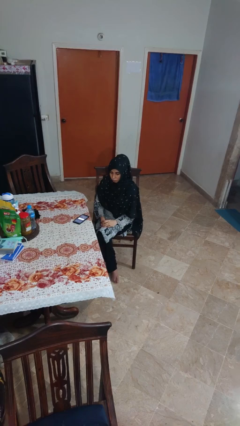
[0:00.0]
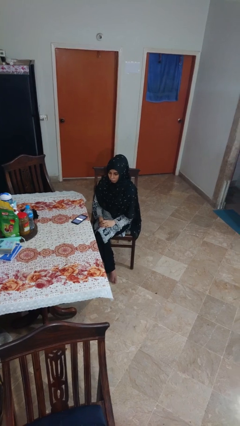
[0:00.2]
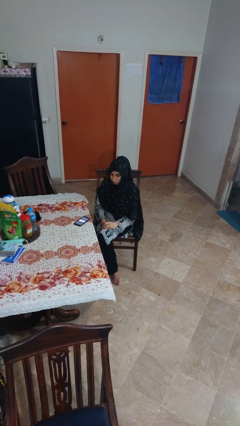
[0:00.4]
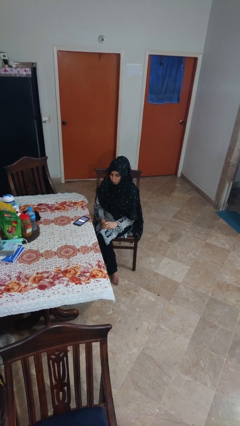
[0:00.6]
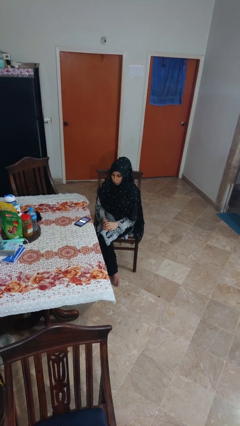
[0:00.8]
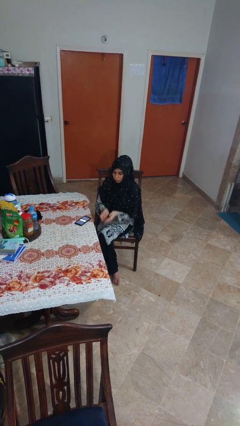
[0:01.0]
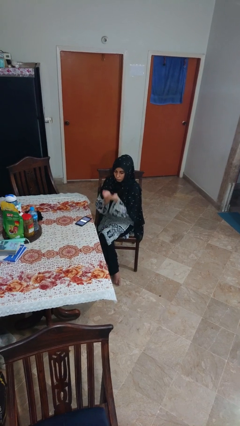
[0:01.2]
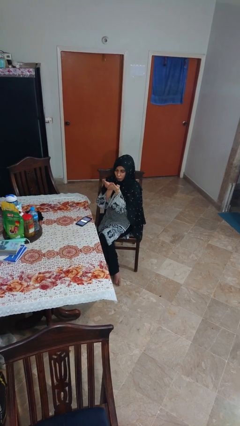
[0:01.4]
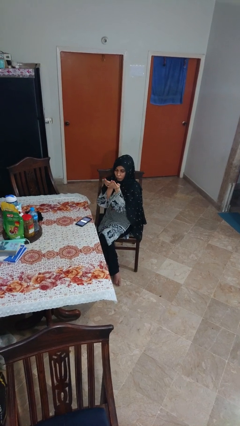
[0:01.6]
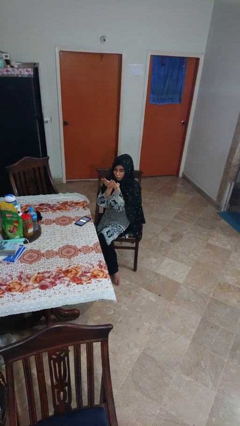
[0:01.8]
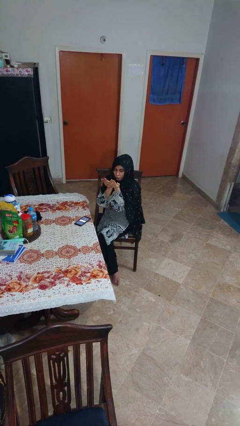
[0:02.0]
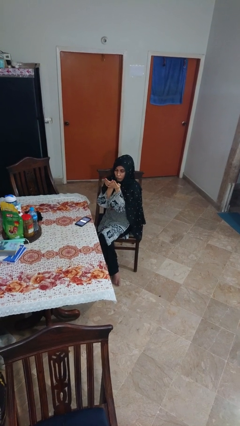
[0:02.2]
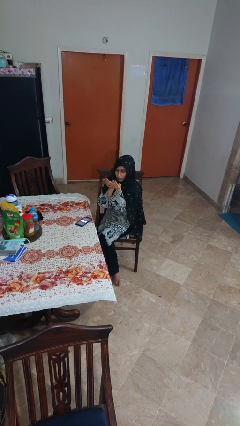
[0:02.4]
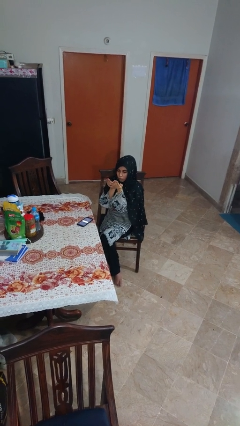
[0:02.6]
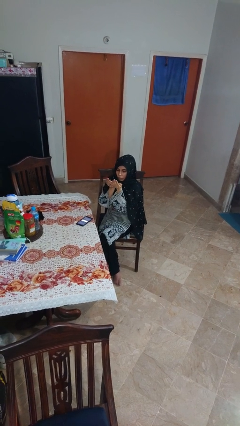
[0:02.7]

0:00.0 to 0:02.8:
person prays

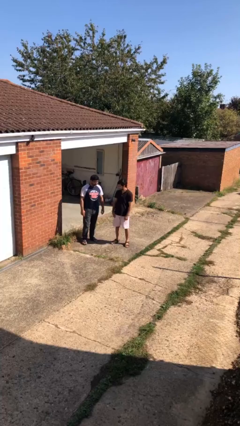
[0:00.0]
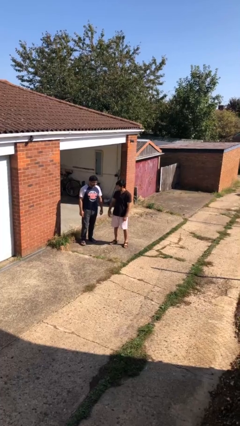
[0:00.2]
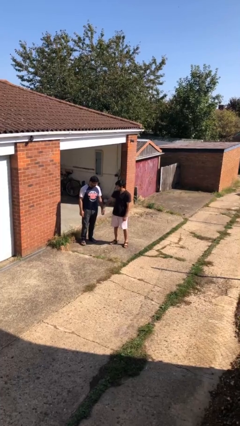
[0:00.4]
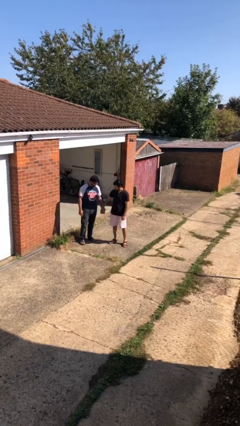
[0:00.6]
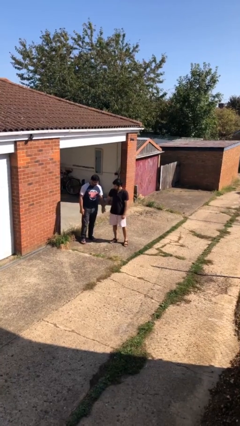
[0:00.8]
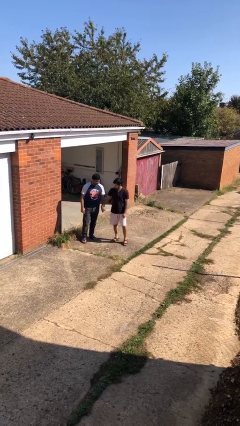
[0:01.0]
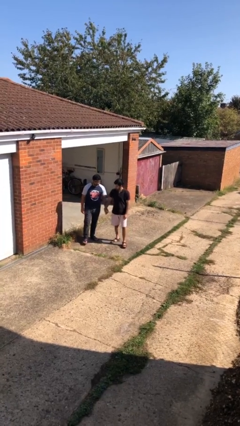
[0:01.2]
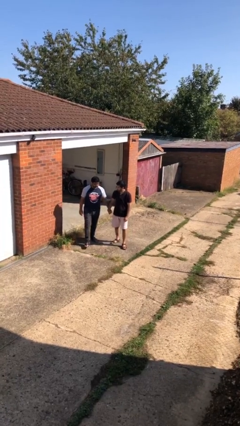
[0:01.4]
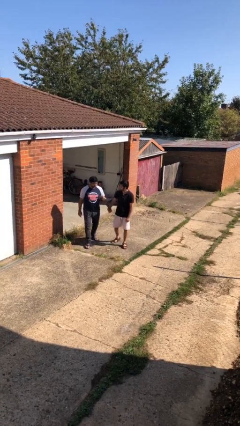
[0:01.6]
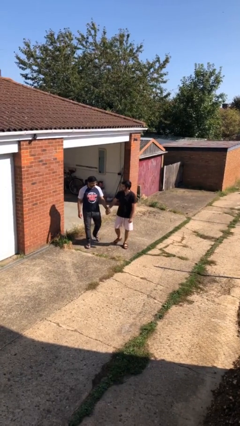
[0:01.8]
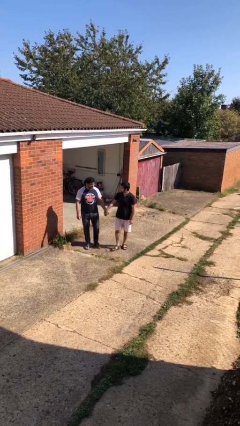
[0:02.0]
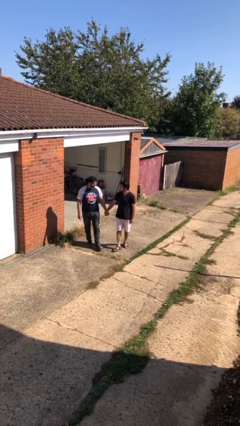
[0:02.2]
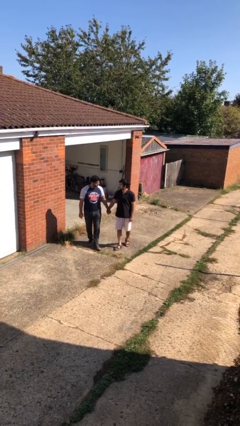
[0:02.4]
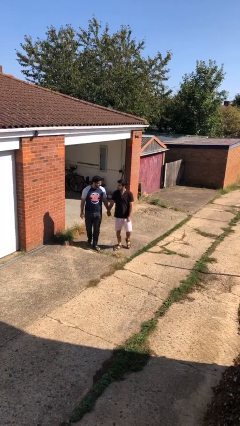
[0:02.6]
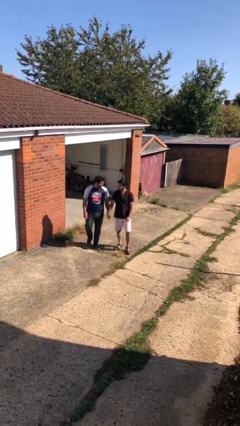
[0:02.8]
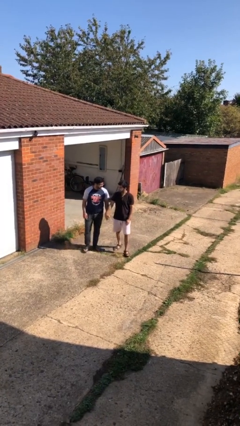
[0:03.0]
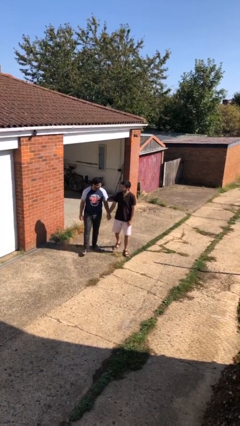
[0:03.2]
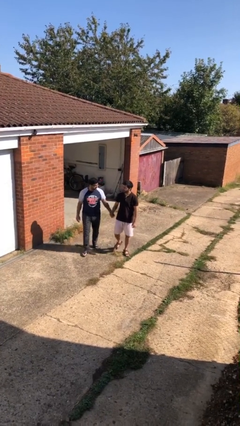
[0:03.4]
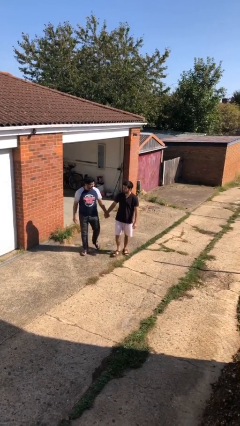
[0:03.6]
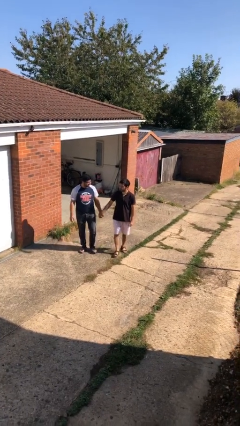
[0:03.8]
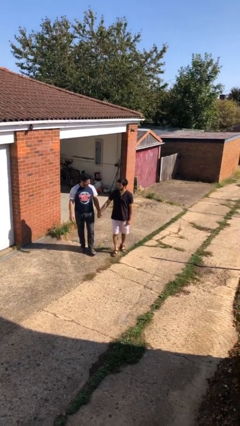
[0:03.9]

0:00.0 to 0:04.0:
person holds hand

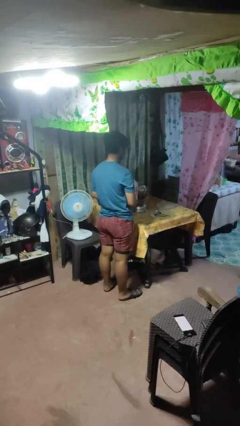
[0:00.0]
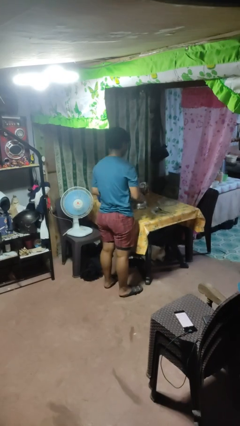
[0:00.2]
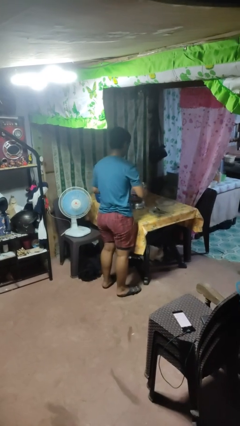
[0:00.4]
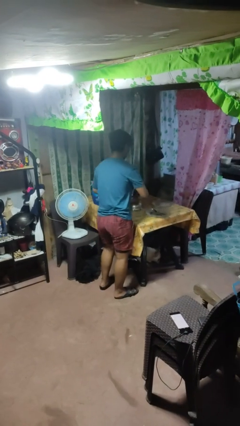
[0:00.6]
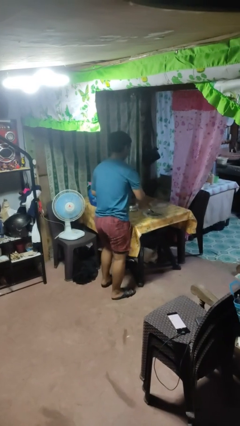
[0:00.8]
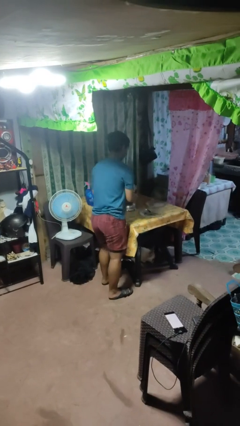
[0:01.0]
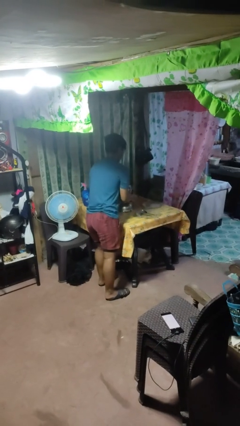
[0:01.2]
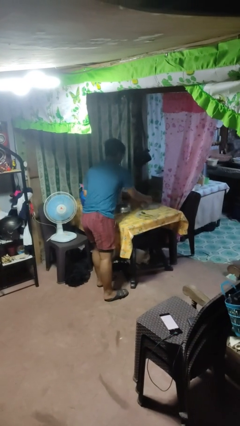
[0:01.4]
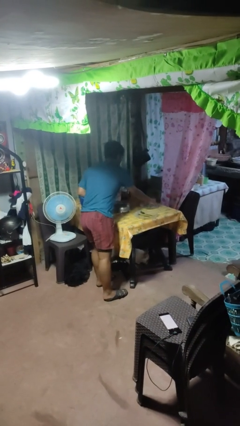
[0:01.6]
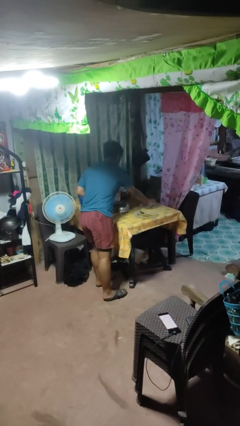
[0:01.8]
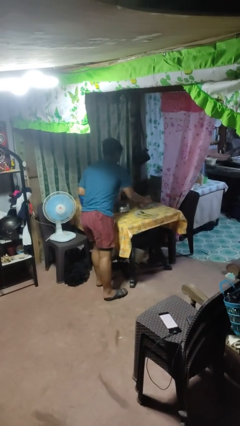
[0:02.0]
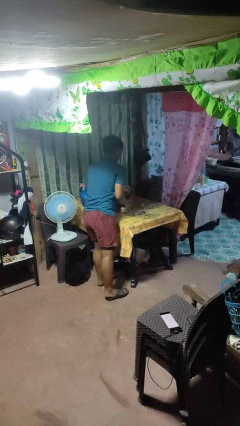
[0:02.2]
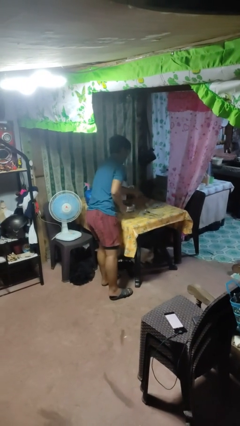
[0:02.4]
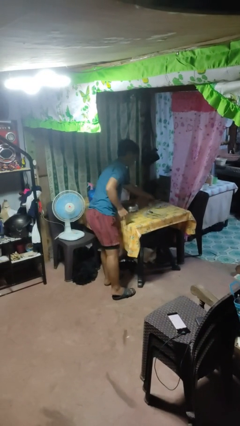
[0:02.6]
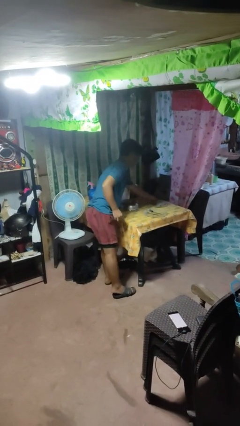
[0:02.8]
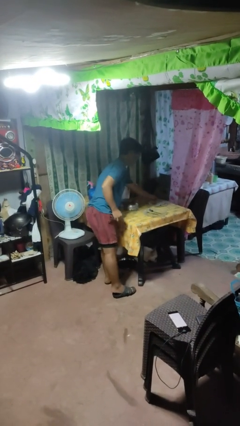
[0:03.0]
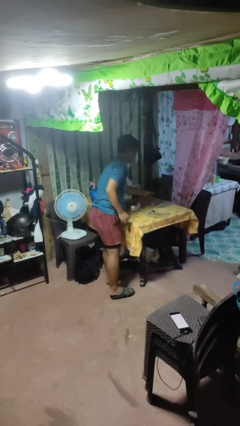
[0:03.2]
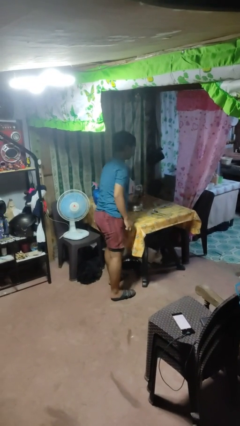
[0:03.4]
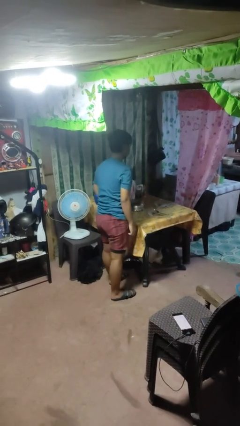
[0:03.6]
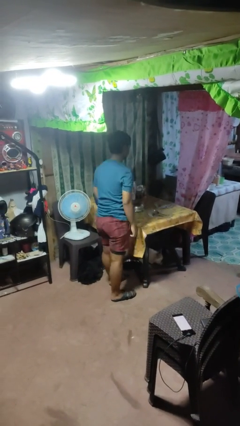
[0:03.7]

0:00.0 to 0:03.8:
person sets table

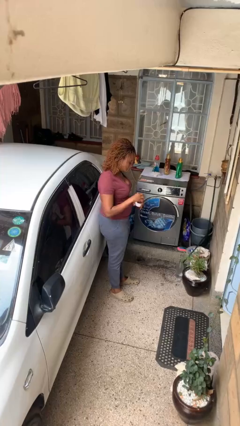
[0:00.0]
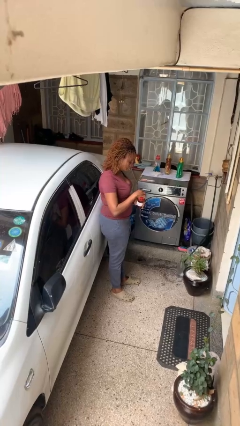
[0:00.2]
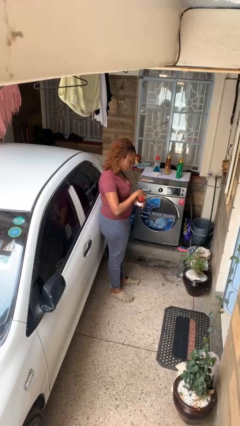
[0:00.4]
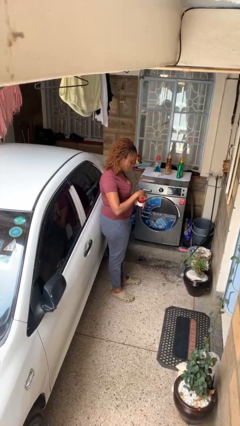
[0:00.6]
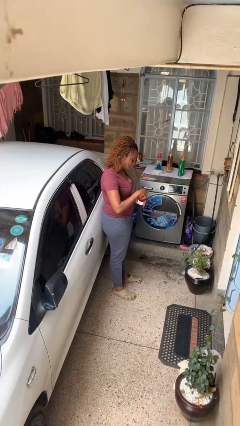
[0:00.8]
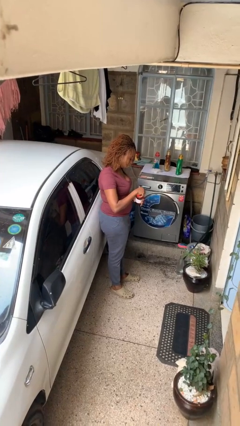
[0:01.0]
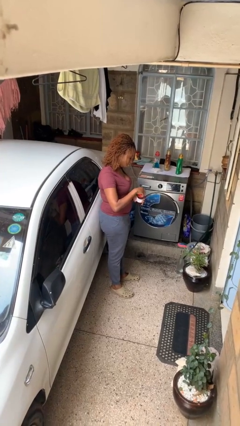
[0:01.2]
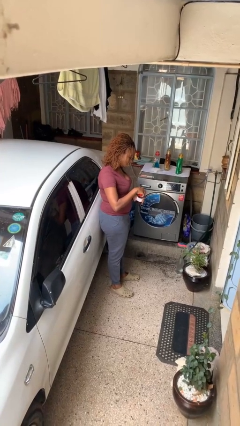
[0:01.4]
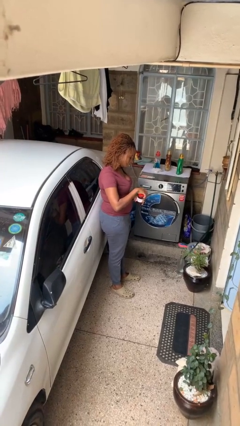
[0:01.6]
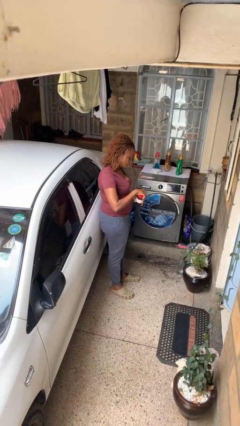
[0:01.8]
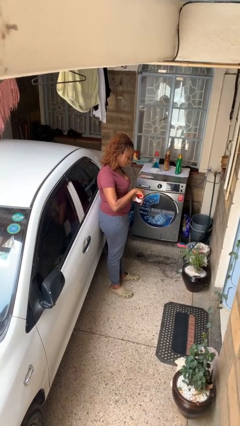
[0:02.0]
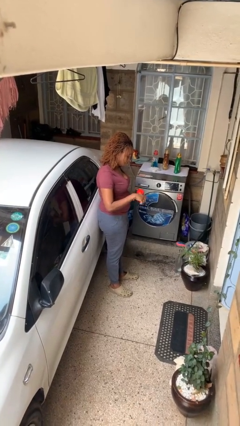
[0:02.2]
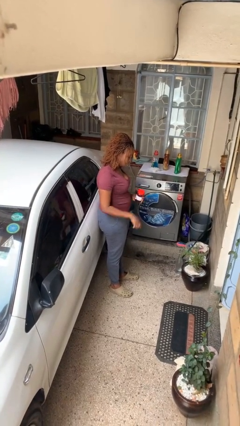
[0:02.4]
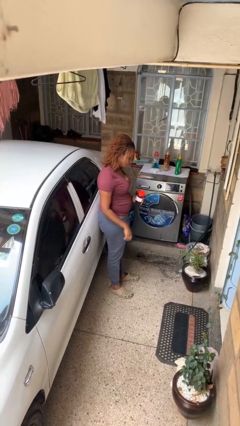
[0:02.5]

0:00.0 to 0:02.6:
person closes jar

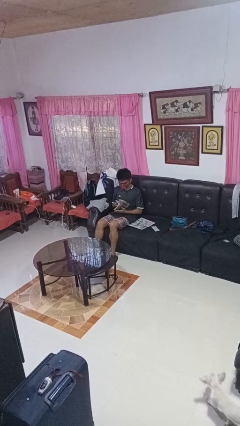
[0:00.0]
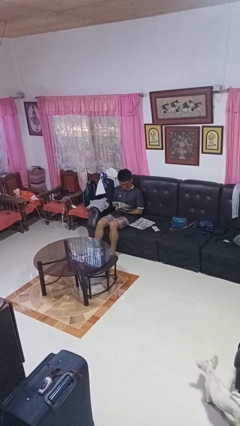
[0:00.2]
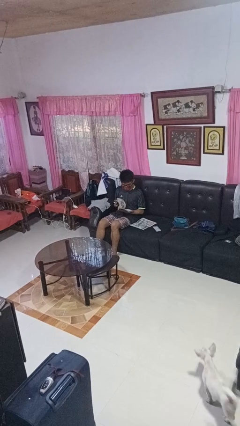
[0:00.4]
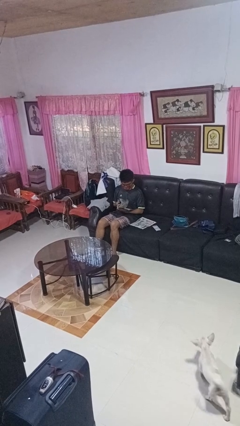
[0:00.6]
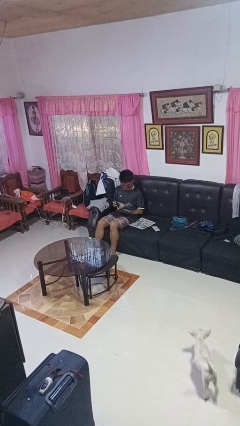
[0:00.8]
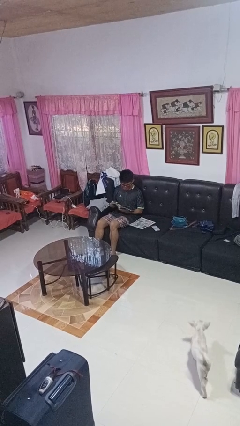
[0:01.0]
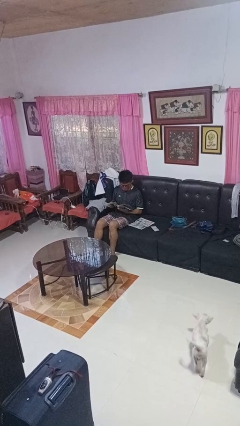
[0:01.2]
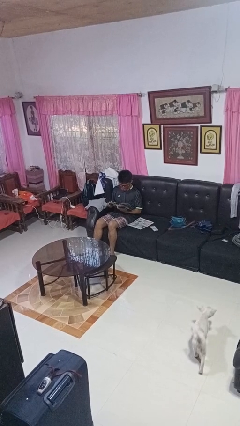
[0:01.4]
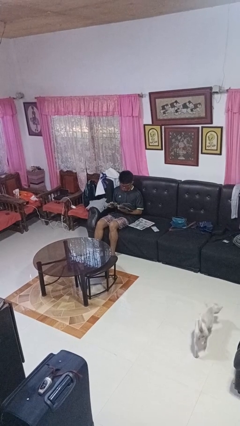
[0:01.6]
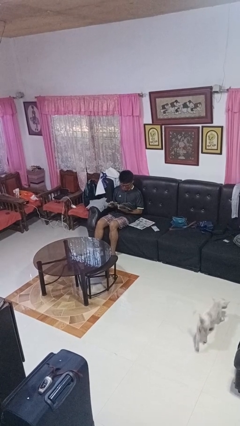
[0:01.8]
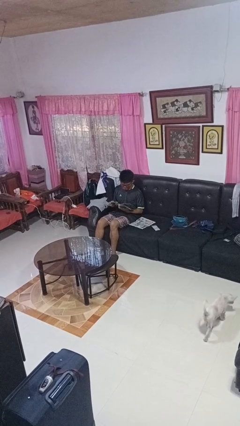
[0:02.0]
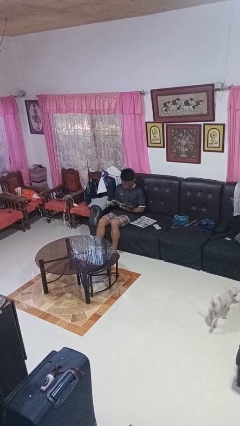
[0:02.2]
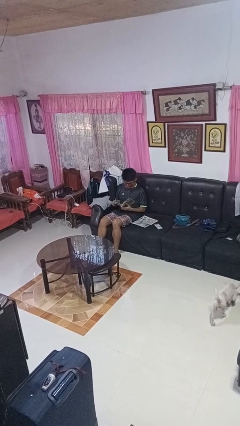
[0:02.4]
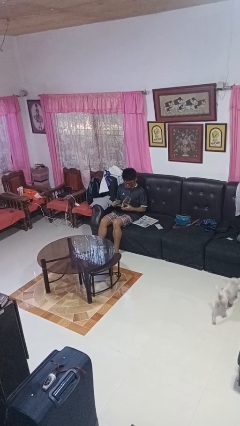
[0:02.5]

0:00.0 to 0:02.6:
person reads magazine

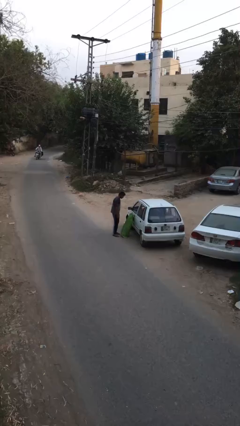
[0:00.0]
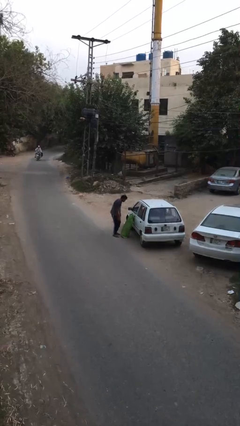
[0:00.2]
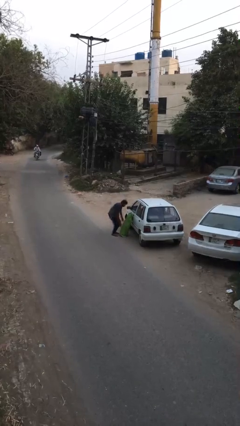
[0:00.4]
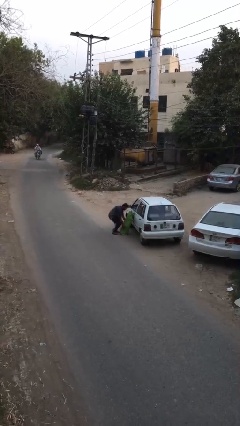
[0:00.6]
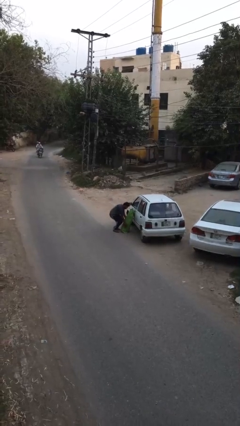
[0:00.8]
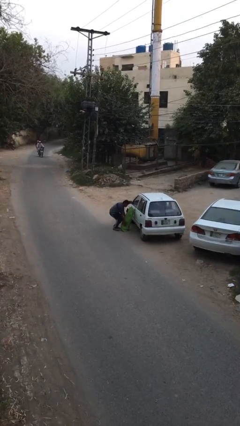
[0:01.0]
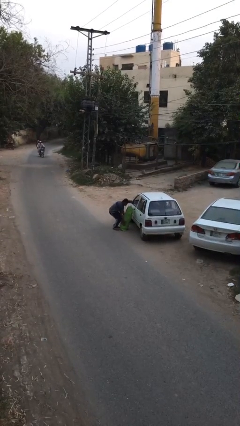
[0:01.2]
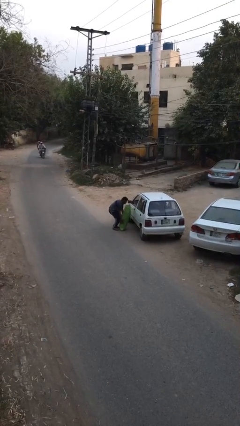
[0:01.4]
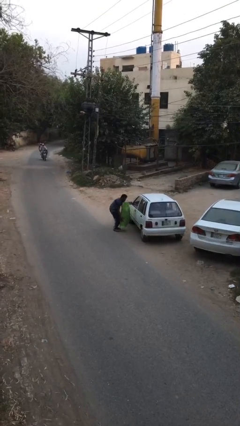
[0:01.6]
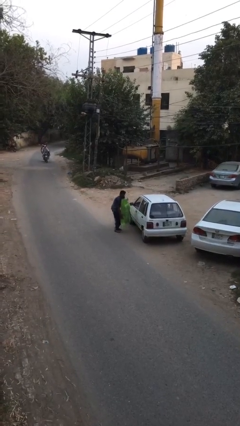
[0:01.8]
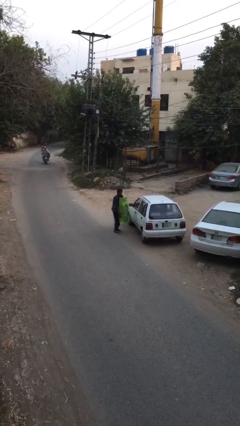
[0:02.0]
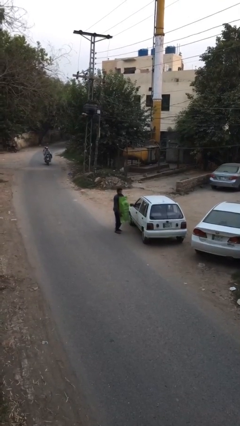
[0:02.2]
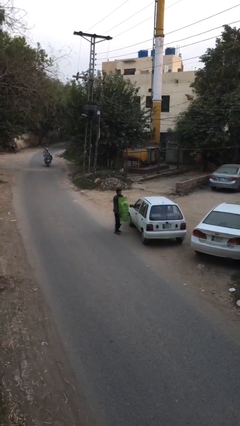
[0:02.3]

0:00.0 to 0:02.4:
person picks up object from floor
